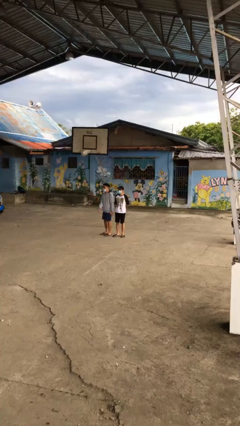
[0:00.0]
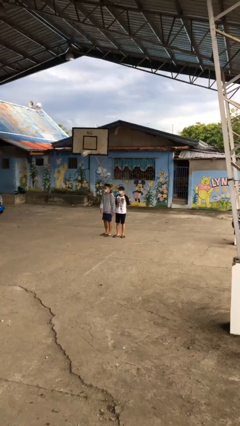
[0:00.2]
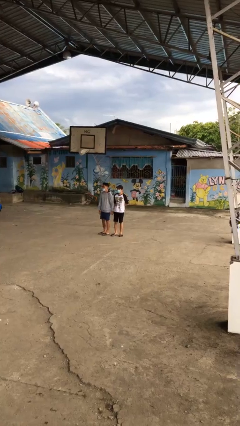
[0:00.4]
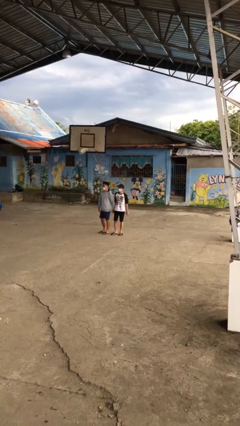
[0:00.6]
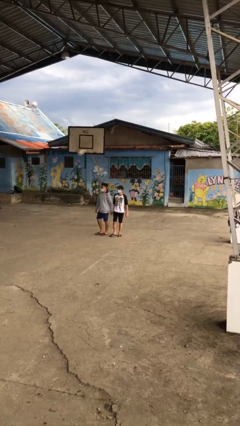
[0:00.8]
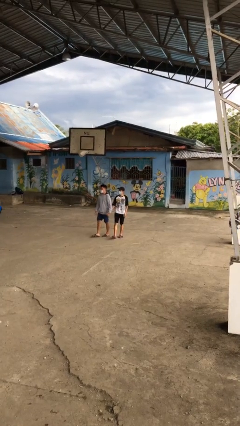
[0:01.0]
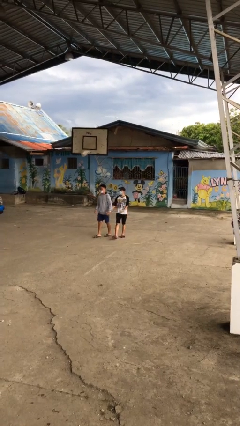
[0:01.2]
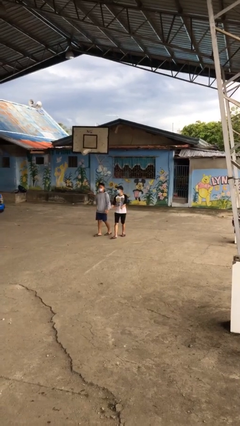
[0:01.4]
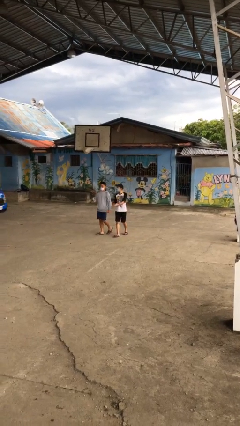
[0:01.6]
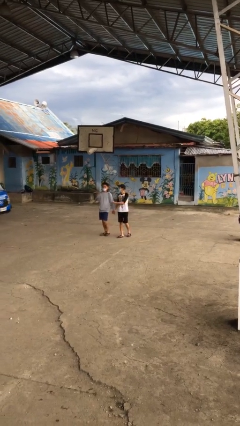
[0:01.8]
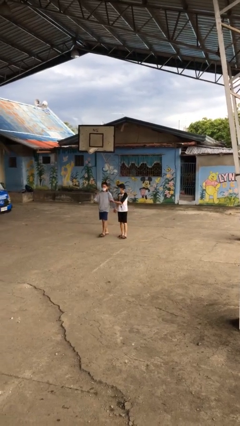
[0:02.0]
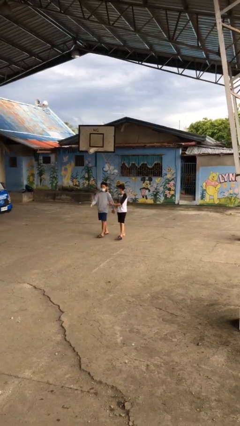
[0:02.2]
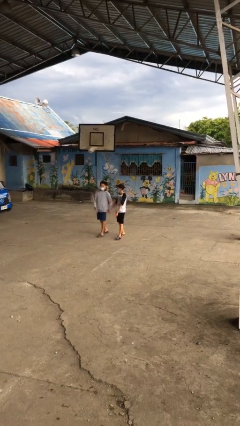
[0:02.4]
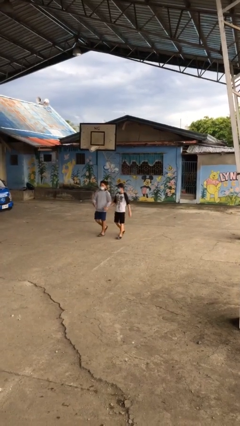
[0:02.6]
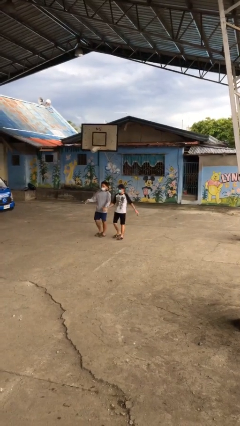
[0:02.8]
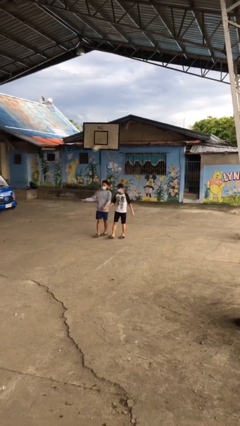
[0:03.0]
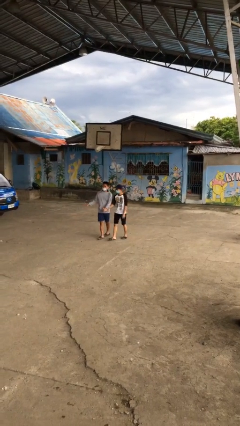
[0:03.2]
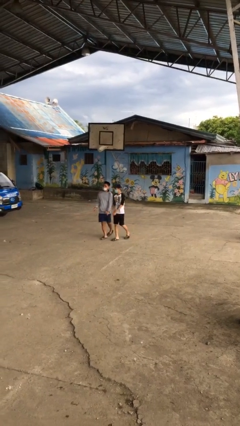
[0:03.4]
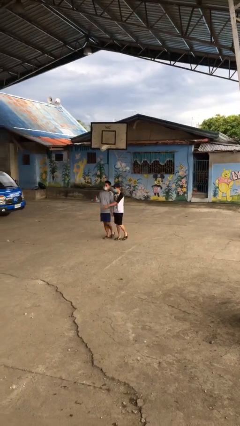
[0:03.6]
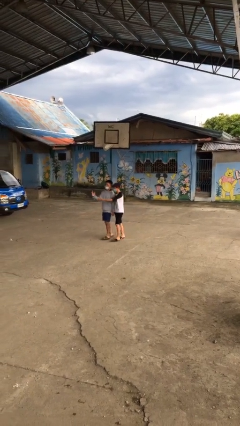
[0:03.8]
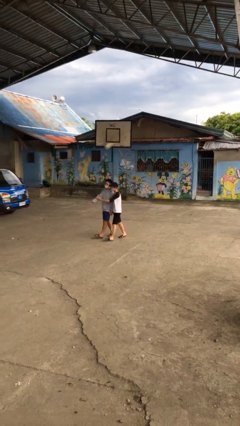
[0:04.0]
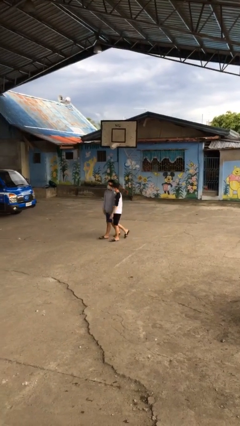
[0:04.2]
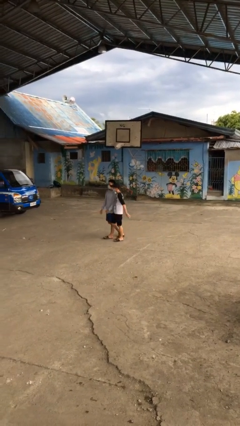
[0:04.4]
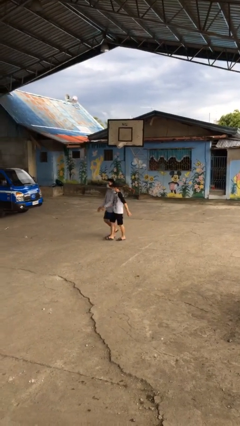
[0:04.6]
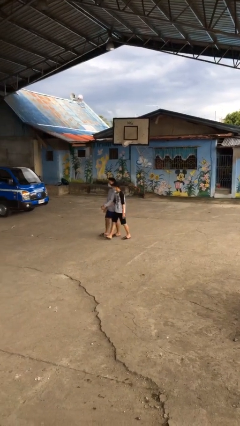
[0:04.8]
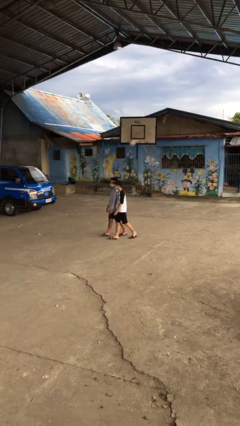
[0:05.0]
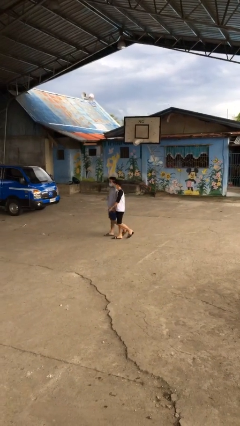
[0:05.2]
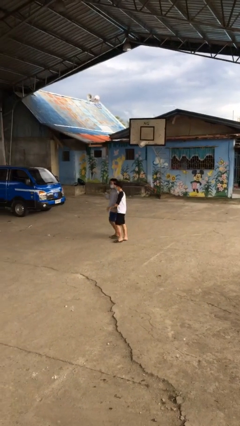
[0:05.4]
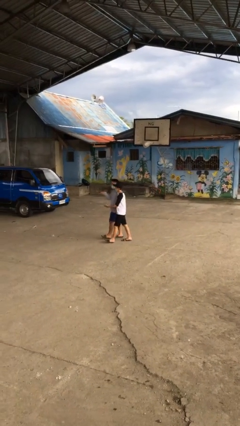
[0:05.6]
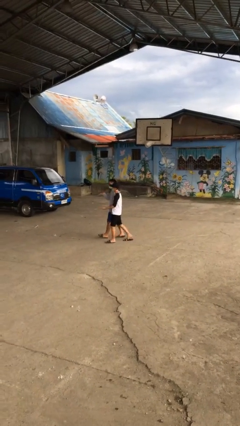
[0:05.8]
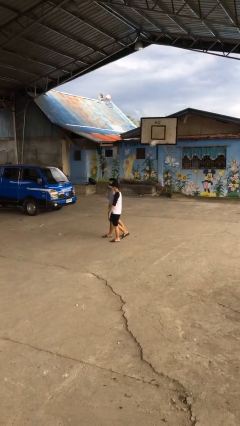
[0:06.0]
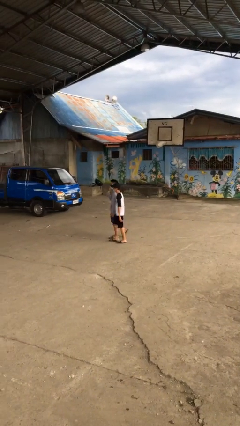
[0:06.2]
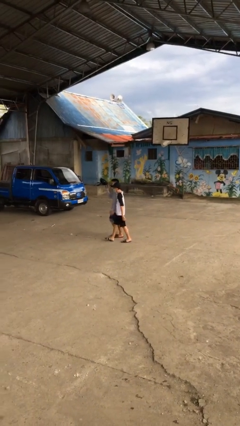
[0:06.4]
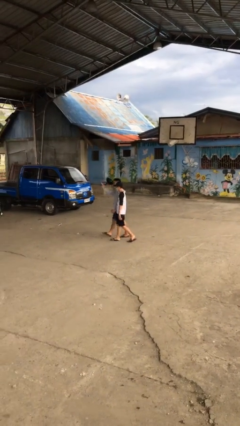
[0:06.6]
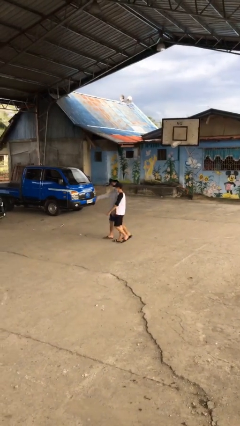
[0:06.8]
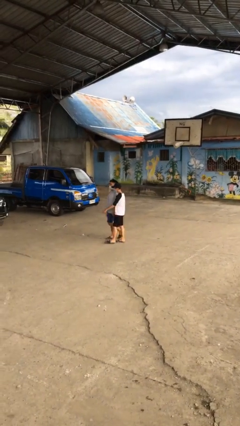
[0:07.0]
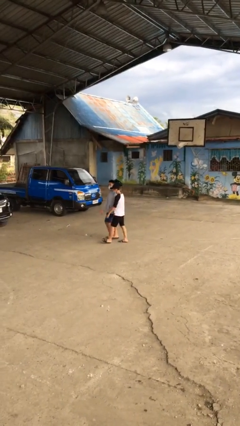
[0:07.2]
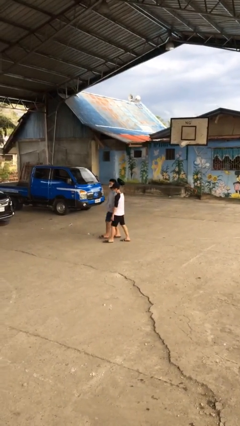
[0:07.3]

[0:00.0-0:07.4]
person holds hand

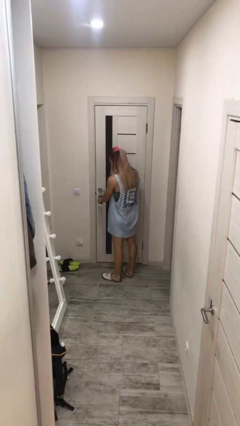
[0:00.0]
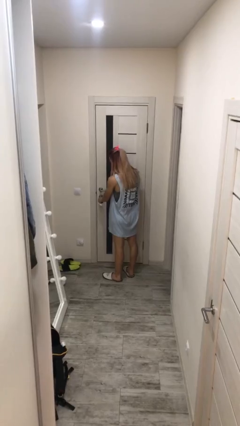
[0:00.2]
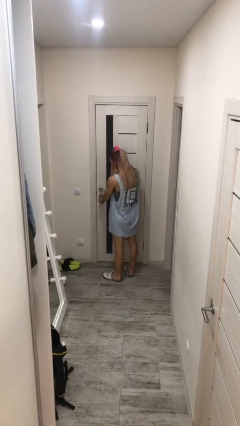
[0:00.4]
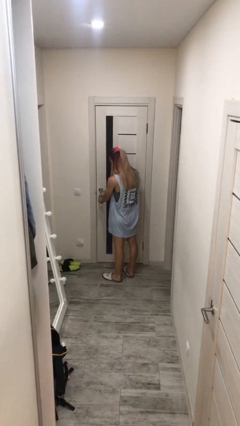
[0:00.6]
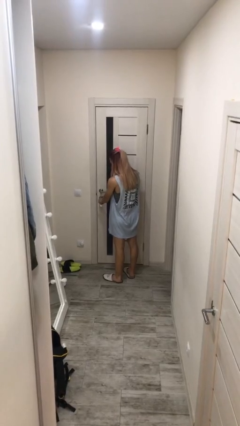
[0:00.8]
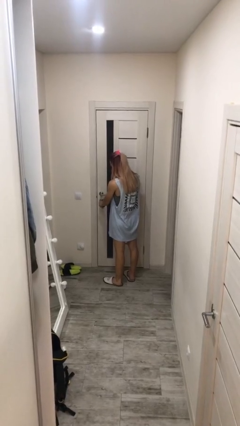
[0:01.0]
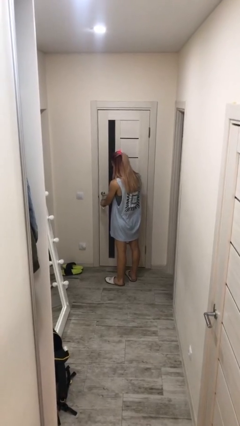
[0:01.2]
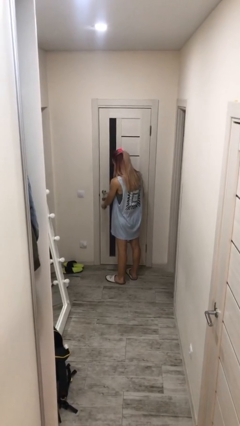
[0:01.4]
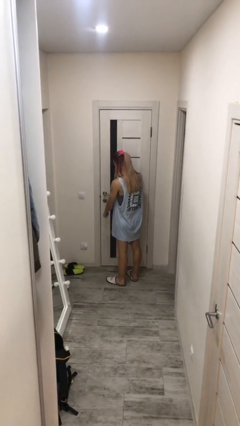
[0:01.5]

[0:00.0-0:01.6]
person unlocks door with keys

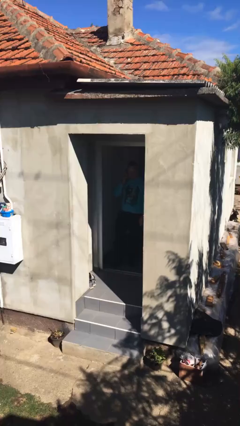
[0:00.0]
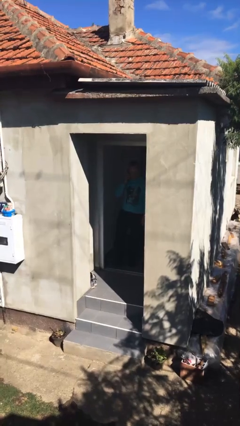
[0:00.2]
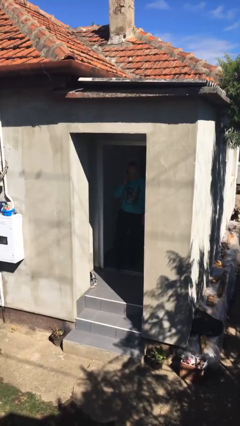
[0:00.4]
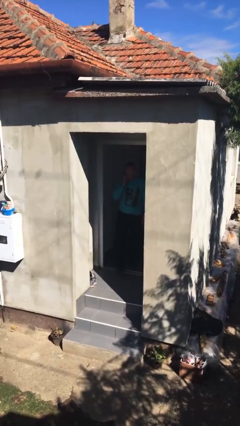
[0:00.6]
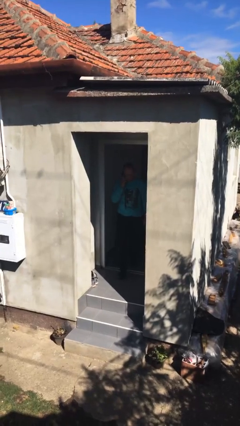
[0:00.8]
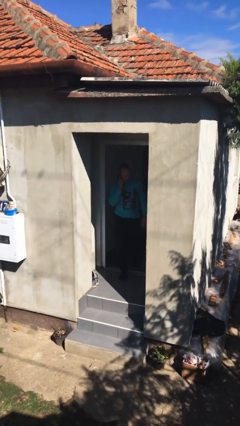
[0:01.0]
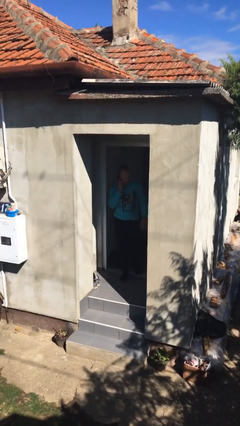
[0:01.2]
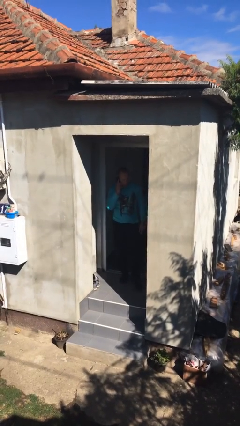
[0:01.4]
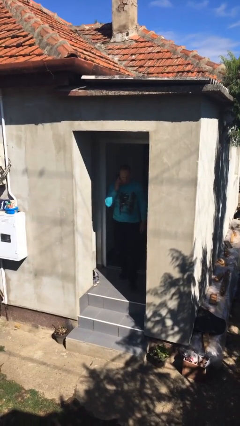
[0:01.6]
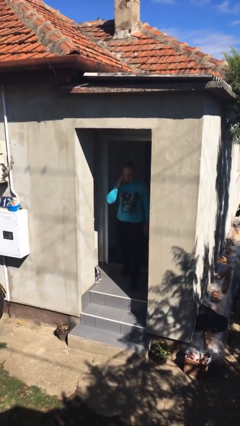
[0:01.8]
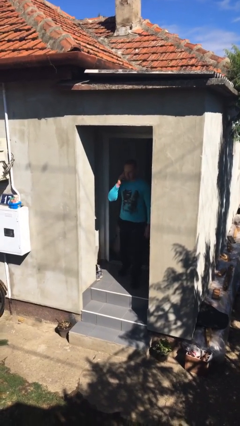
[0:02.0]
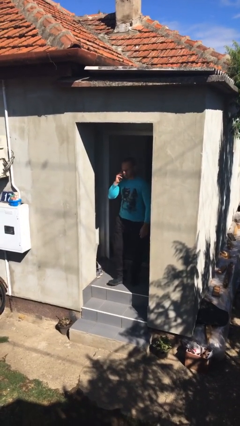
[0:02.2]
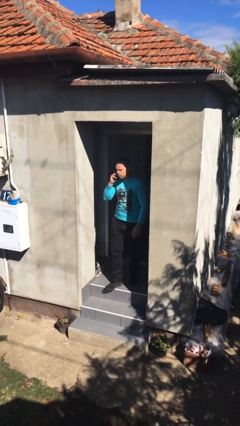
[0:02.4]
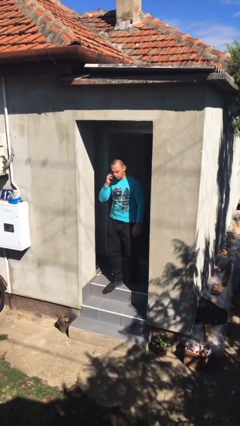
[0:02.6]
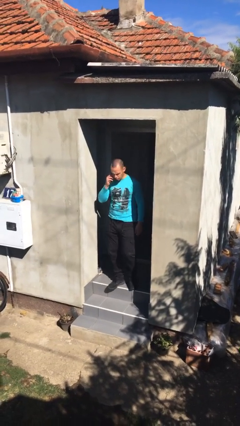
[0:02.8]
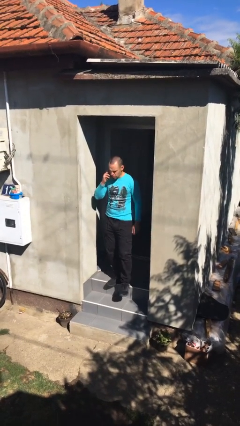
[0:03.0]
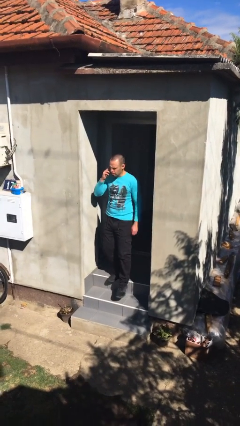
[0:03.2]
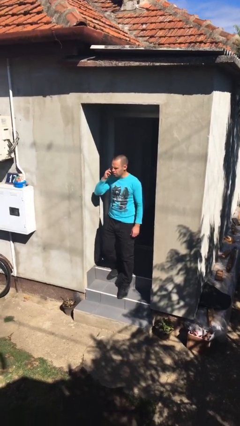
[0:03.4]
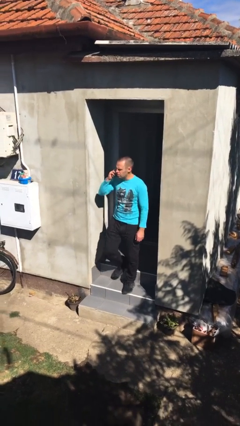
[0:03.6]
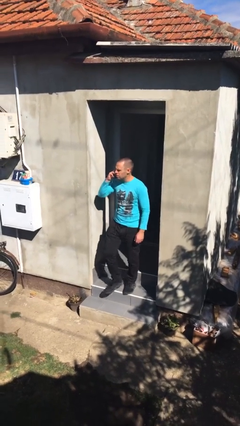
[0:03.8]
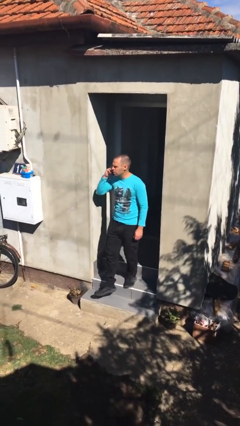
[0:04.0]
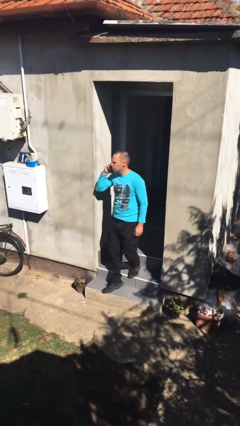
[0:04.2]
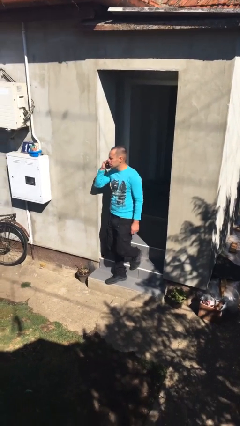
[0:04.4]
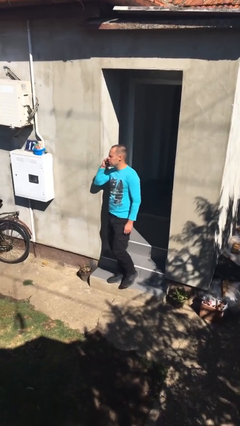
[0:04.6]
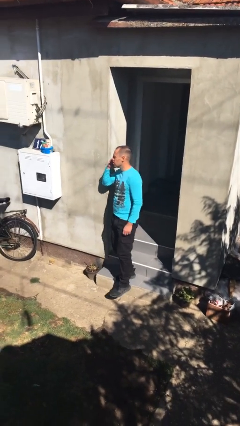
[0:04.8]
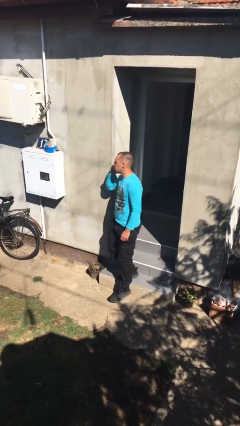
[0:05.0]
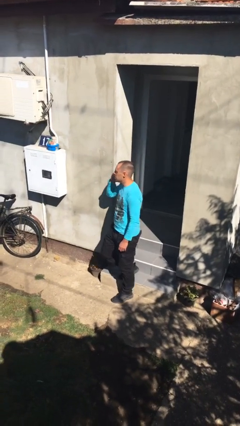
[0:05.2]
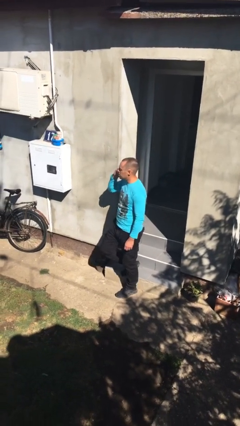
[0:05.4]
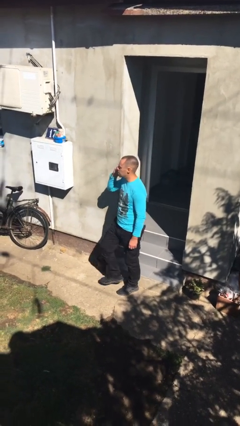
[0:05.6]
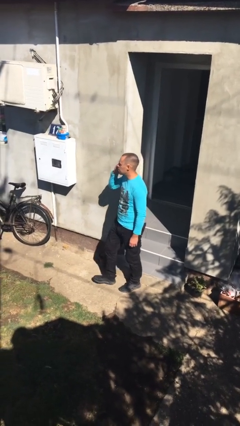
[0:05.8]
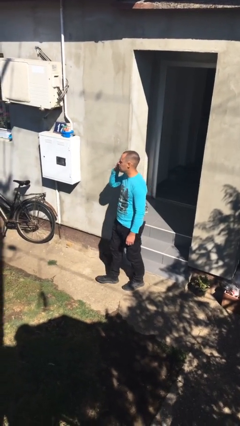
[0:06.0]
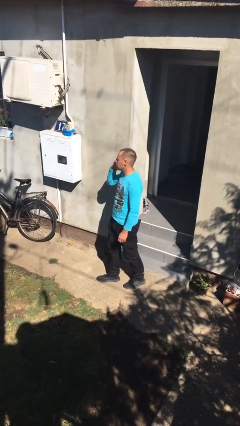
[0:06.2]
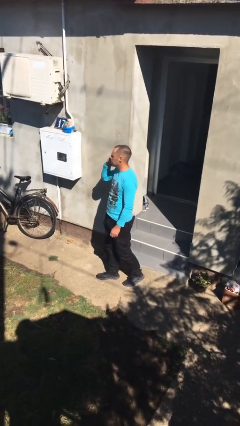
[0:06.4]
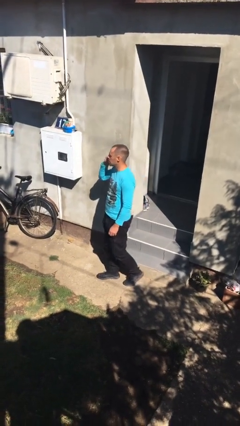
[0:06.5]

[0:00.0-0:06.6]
person enters scene through structure

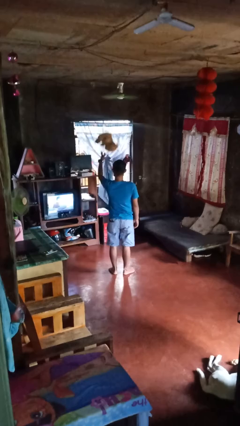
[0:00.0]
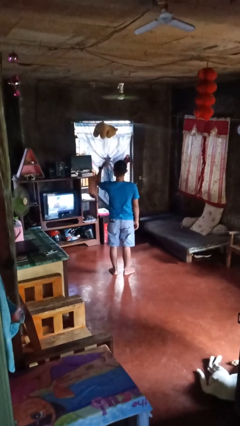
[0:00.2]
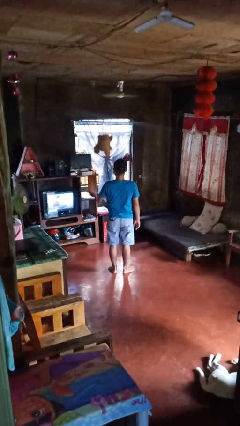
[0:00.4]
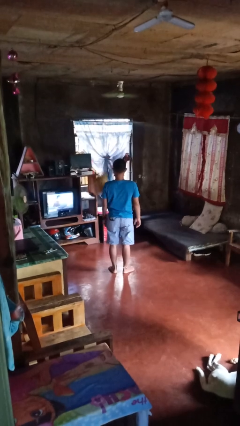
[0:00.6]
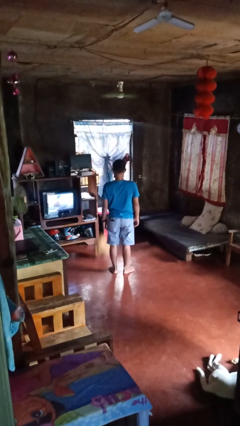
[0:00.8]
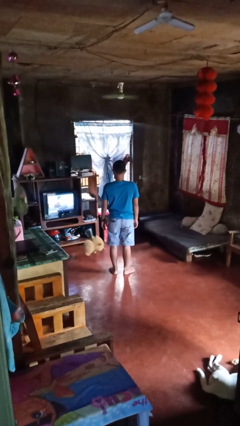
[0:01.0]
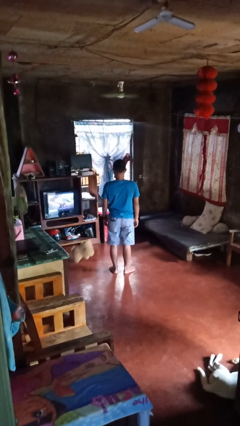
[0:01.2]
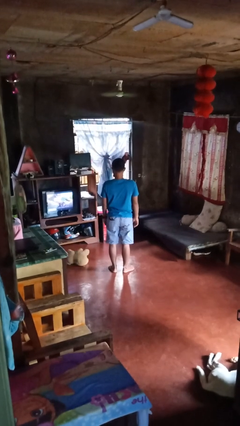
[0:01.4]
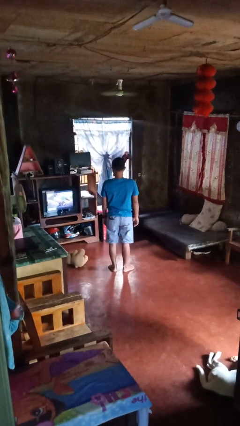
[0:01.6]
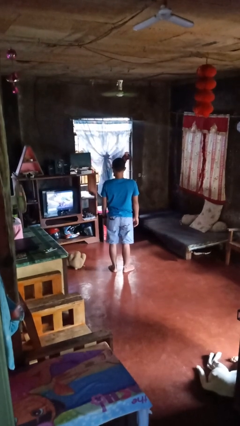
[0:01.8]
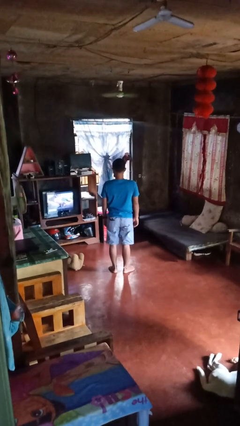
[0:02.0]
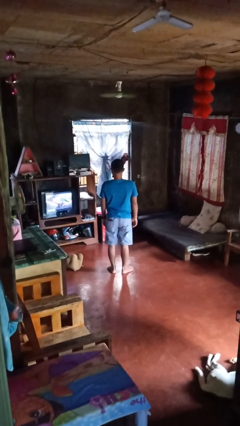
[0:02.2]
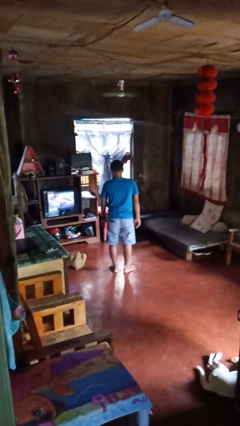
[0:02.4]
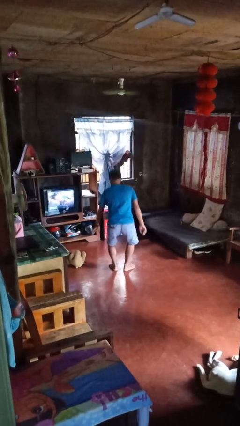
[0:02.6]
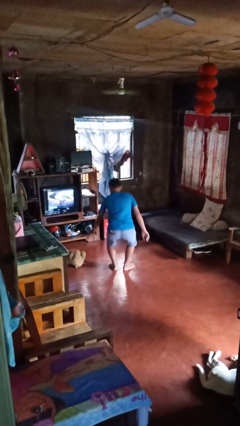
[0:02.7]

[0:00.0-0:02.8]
person throws object into air
